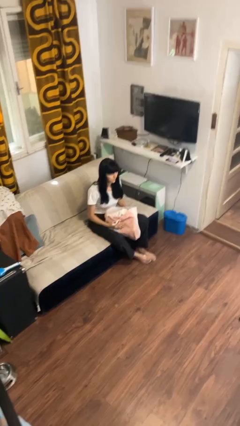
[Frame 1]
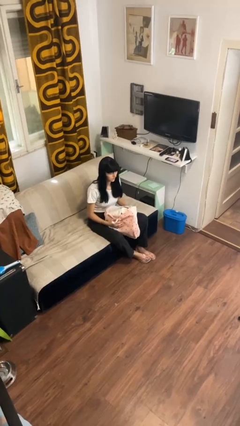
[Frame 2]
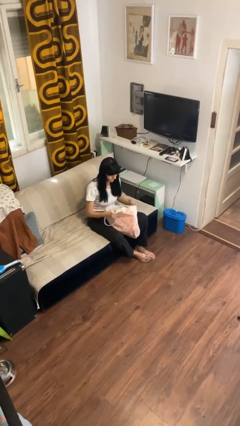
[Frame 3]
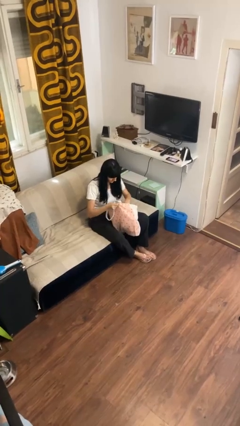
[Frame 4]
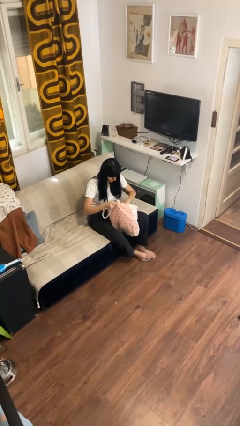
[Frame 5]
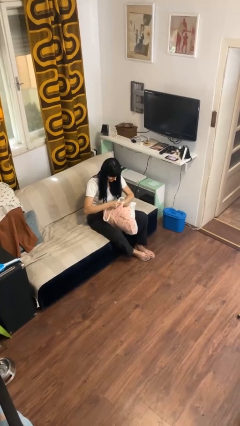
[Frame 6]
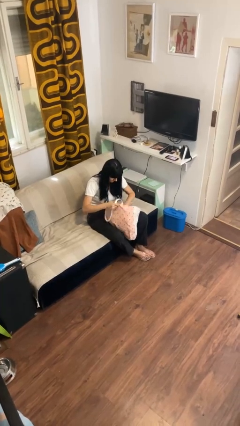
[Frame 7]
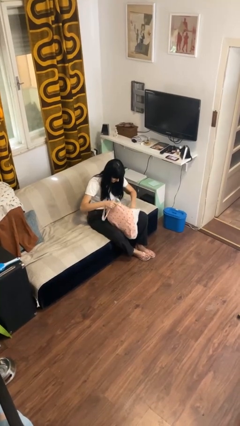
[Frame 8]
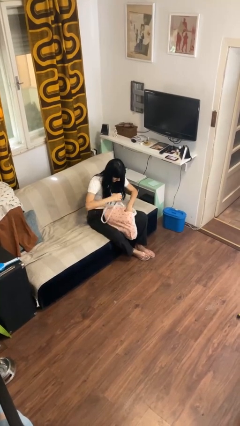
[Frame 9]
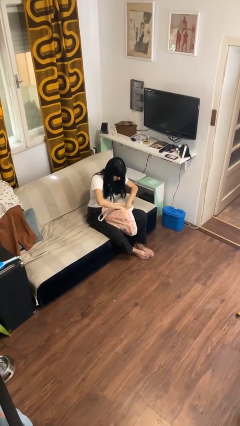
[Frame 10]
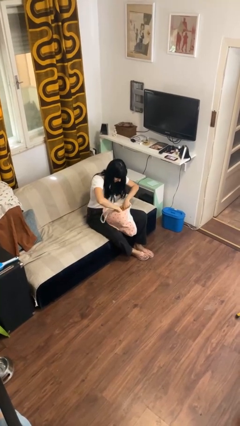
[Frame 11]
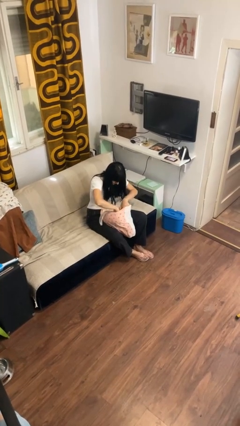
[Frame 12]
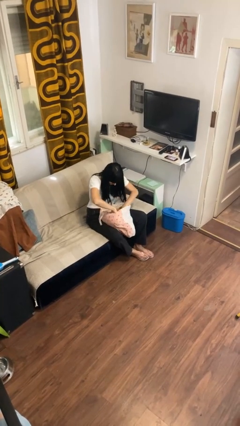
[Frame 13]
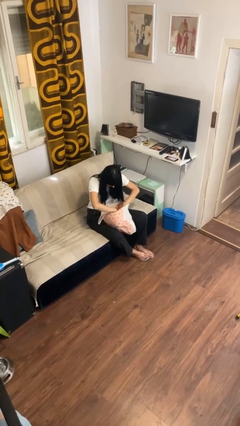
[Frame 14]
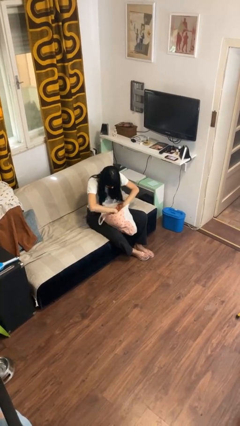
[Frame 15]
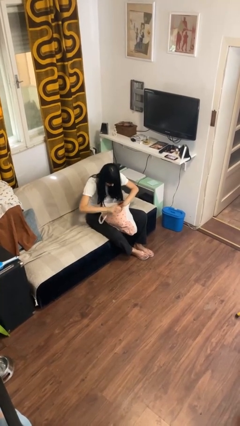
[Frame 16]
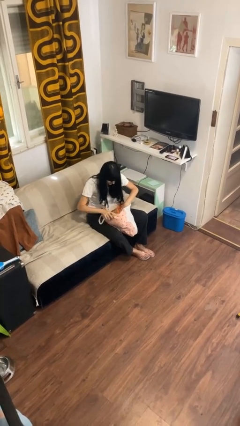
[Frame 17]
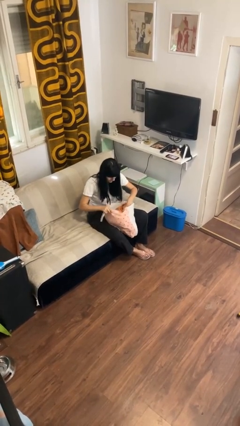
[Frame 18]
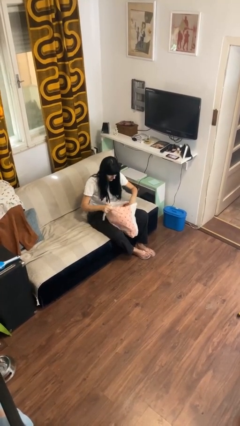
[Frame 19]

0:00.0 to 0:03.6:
person searches in bag

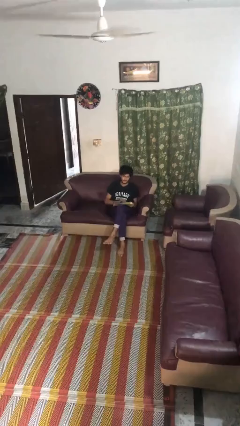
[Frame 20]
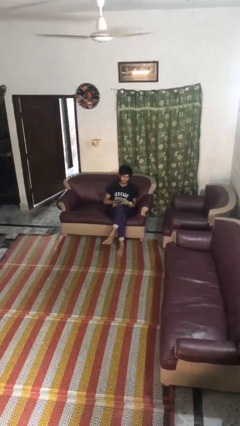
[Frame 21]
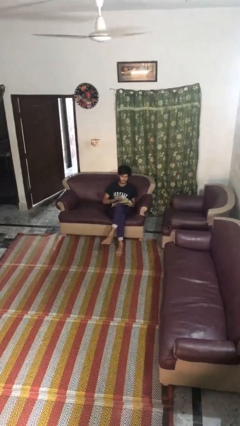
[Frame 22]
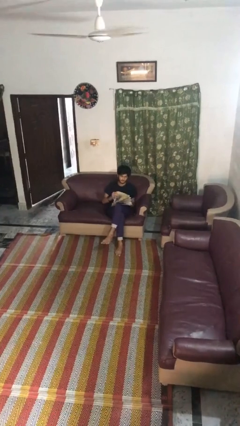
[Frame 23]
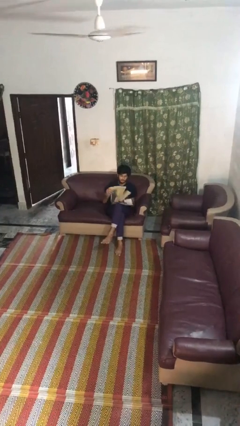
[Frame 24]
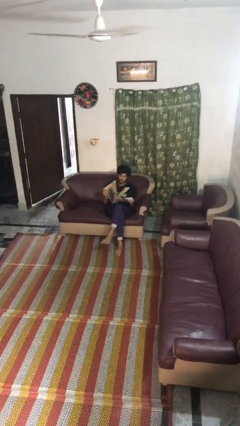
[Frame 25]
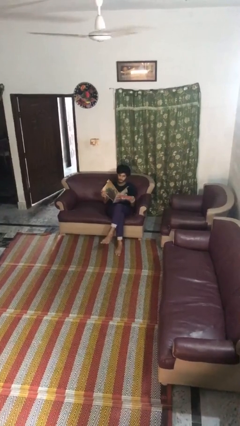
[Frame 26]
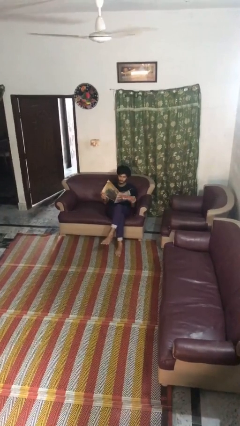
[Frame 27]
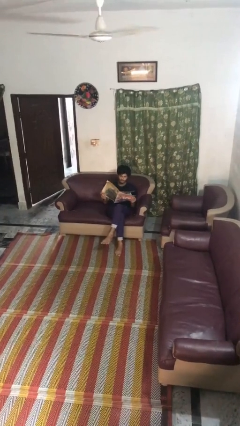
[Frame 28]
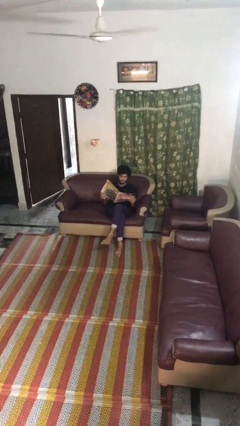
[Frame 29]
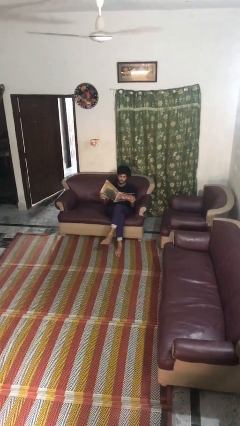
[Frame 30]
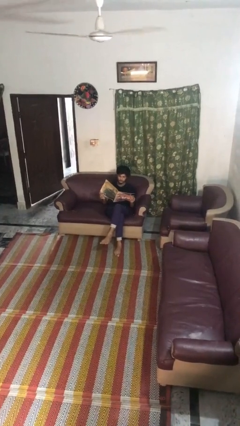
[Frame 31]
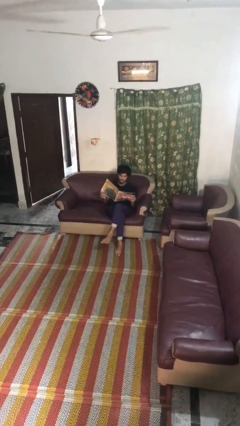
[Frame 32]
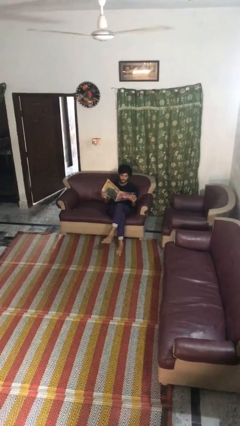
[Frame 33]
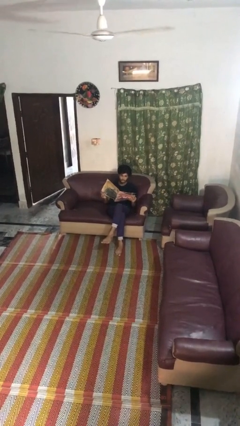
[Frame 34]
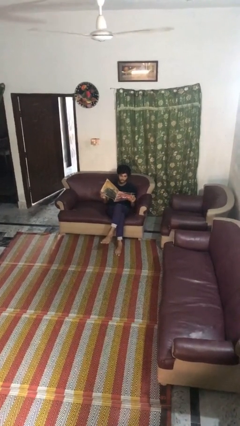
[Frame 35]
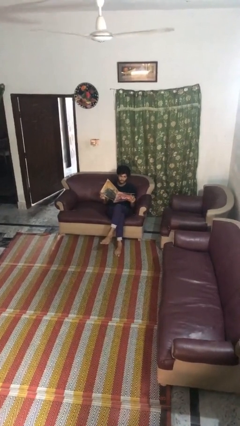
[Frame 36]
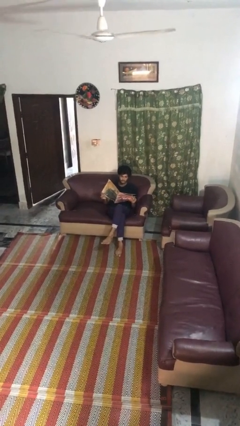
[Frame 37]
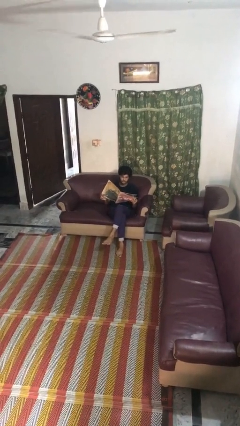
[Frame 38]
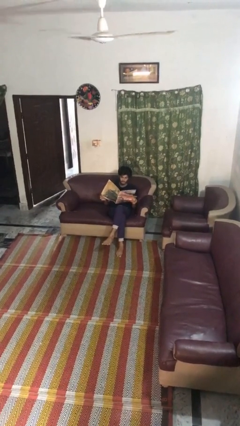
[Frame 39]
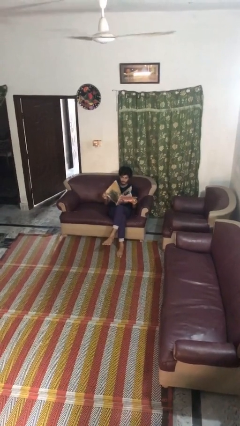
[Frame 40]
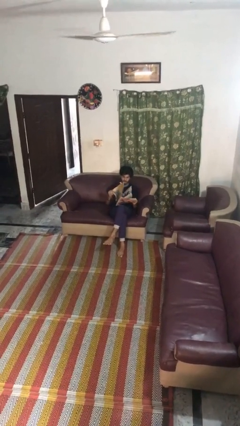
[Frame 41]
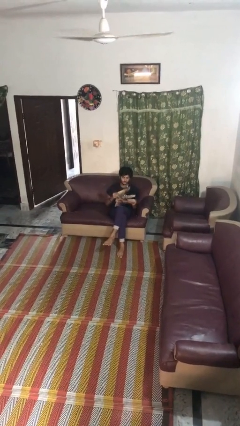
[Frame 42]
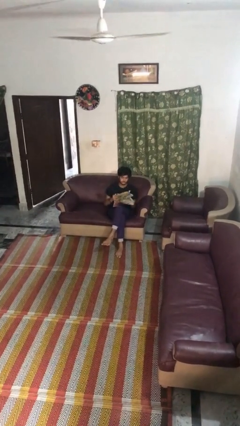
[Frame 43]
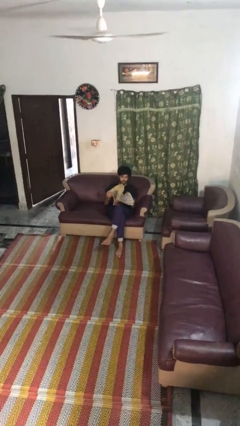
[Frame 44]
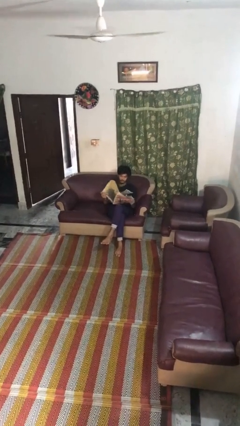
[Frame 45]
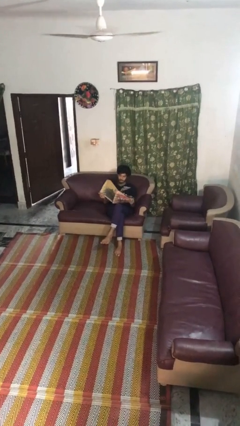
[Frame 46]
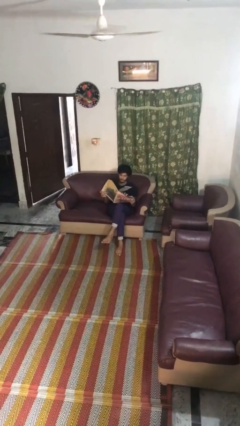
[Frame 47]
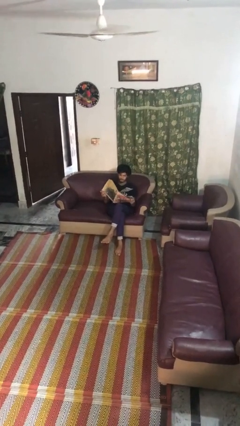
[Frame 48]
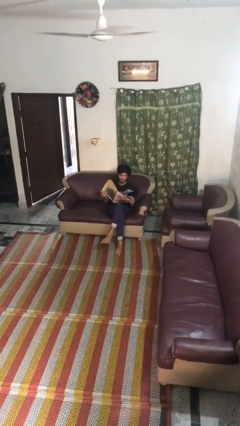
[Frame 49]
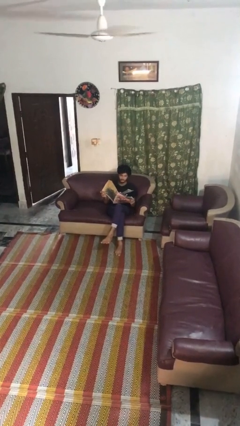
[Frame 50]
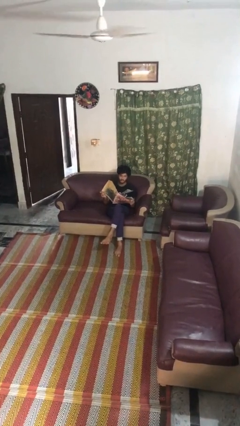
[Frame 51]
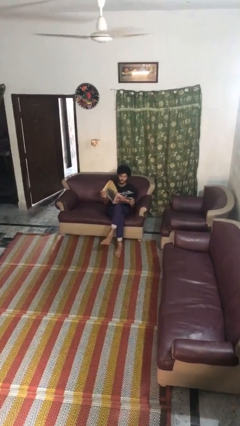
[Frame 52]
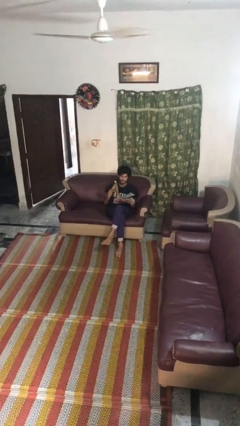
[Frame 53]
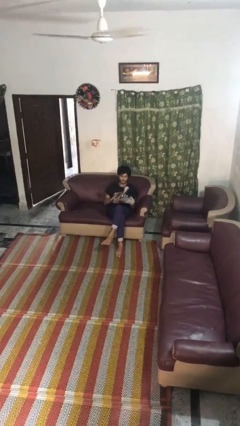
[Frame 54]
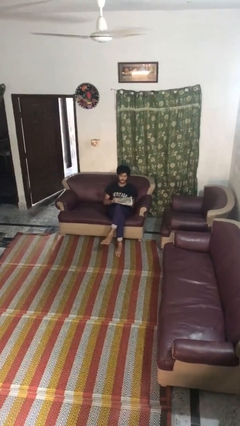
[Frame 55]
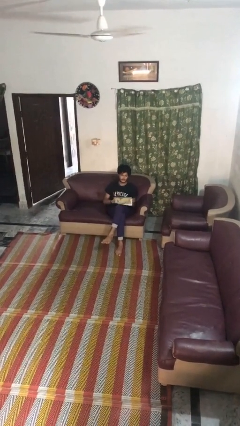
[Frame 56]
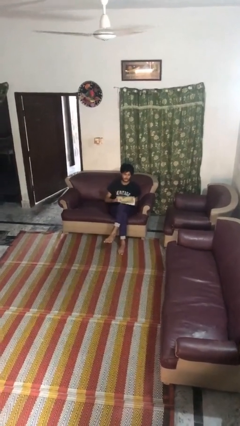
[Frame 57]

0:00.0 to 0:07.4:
person reads magazine

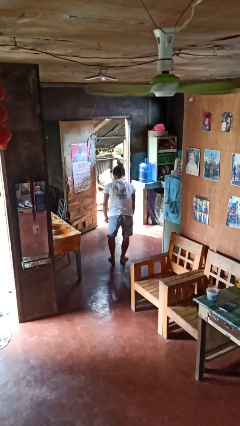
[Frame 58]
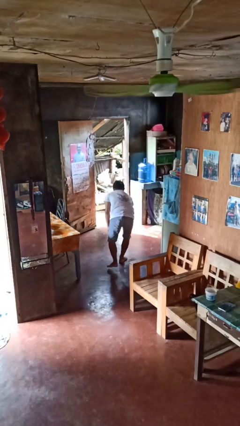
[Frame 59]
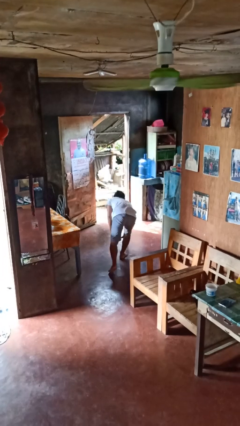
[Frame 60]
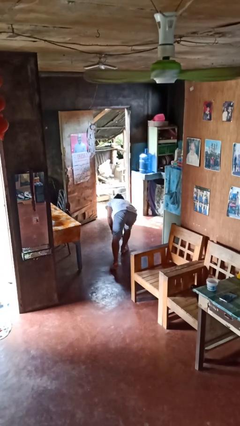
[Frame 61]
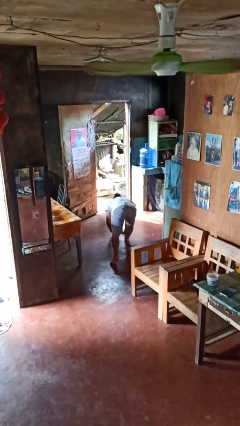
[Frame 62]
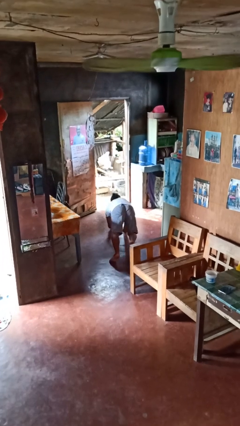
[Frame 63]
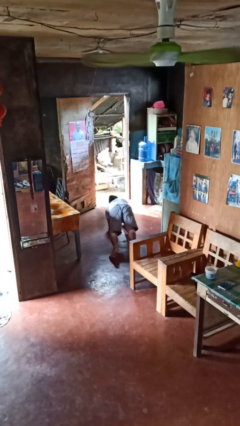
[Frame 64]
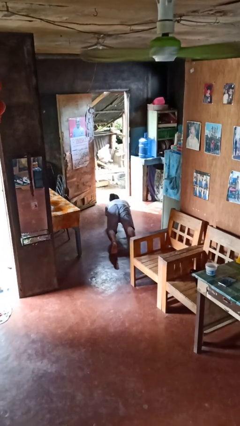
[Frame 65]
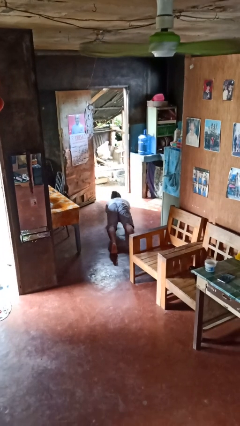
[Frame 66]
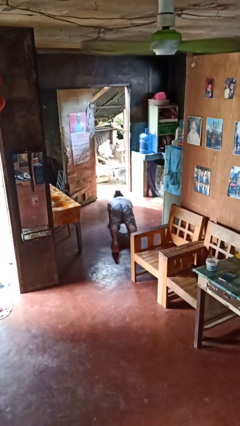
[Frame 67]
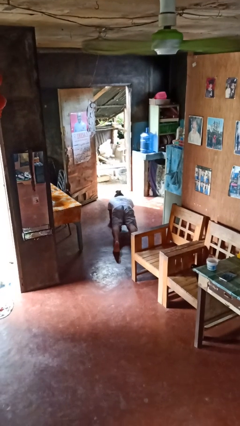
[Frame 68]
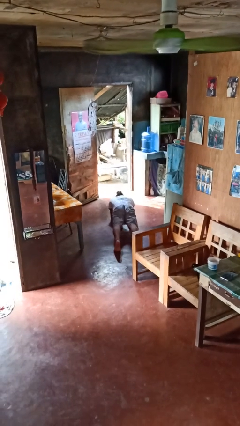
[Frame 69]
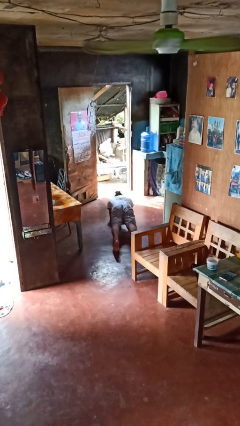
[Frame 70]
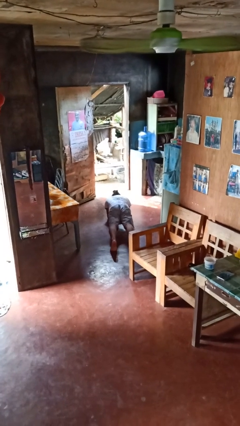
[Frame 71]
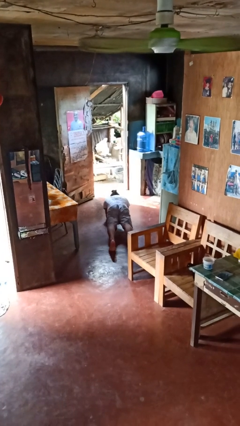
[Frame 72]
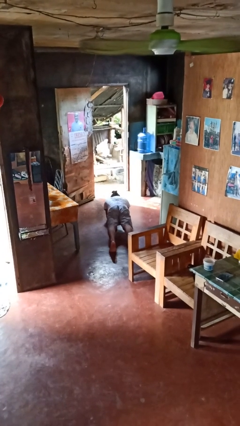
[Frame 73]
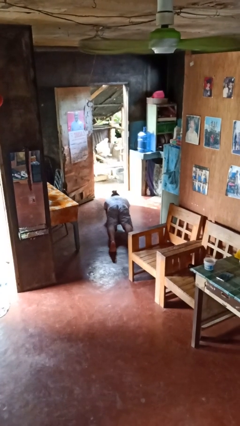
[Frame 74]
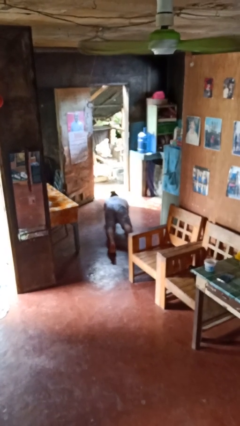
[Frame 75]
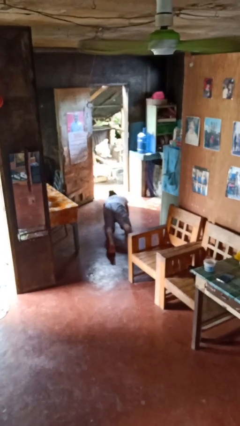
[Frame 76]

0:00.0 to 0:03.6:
person exercises with plank

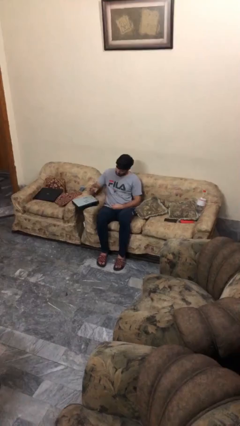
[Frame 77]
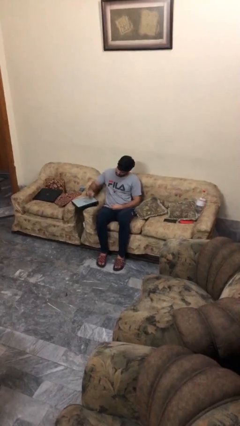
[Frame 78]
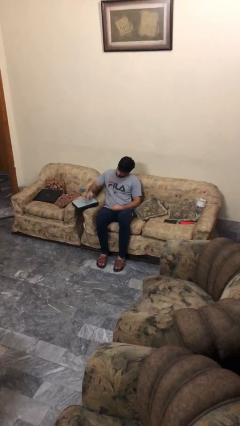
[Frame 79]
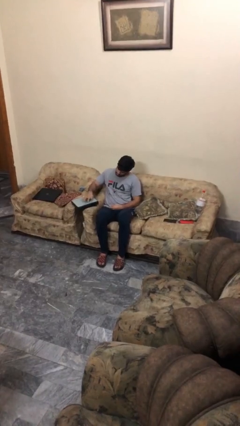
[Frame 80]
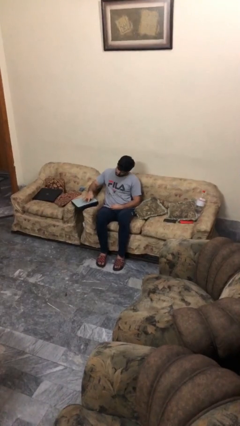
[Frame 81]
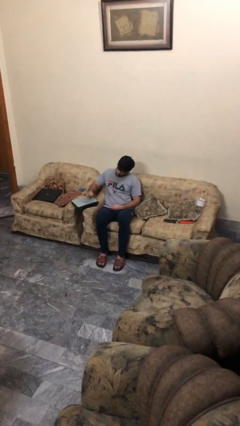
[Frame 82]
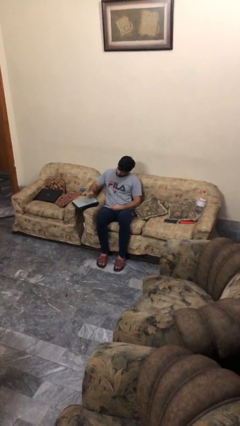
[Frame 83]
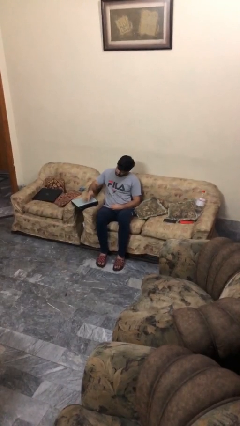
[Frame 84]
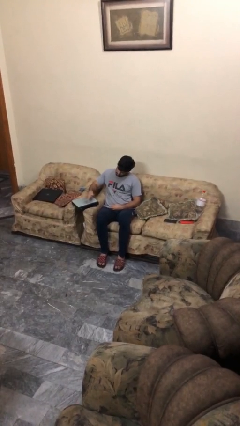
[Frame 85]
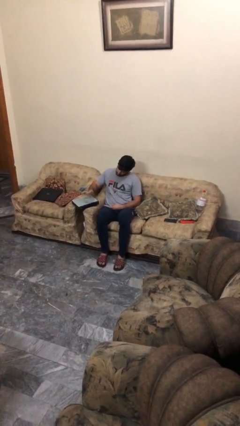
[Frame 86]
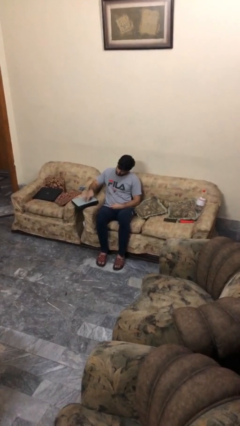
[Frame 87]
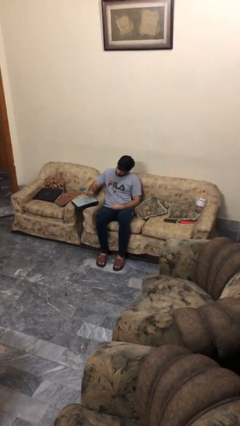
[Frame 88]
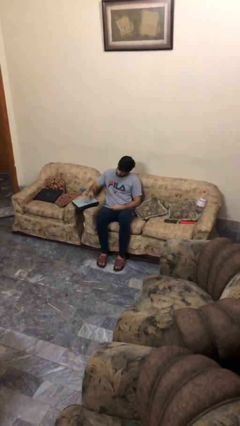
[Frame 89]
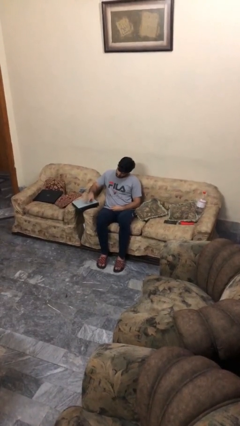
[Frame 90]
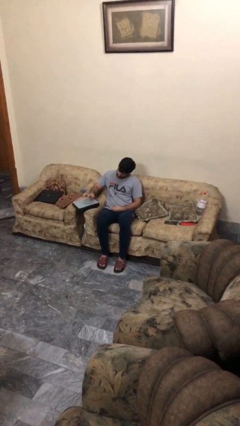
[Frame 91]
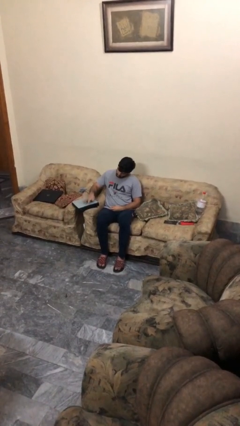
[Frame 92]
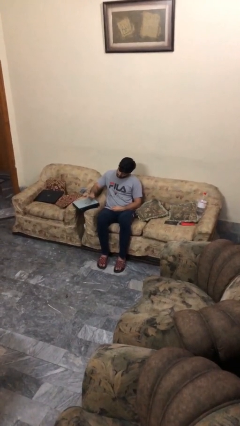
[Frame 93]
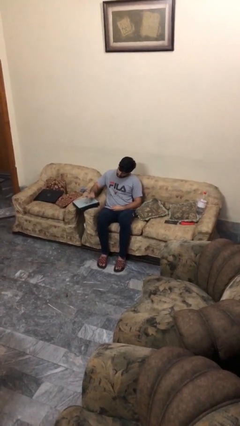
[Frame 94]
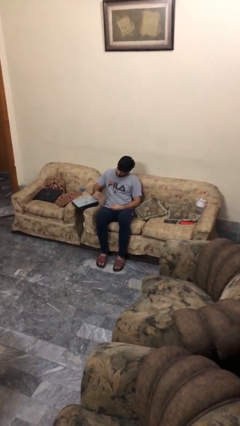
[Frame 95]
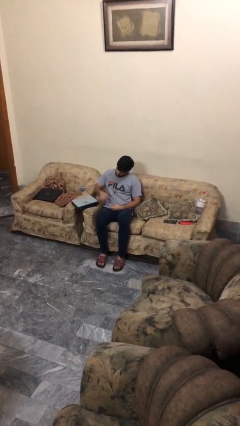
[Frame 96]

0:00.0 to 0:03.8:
person taps object with finger
